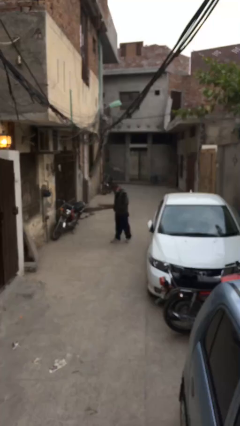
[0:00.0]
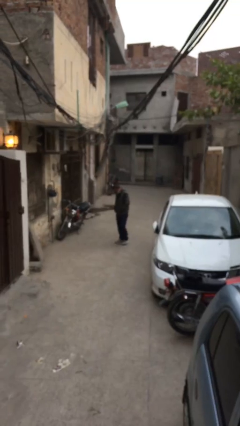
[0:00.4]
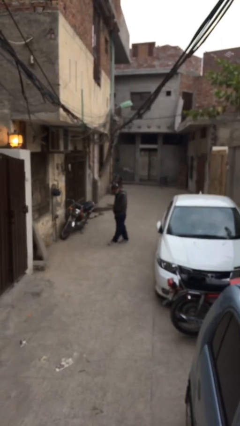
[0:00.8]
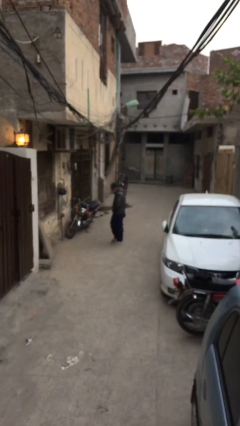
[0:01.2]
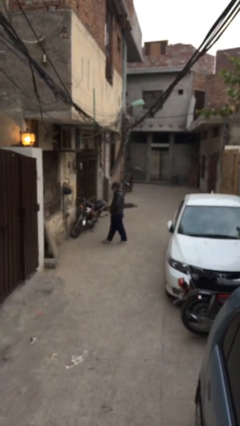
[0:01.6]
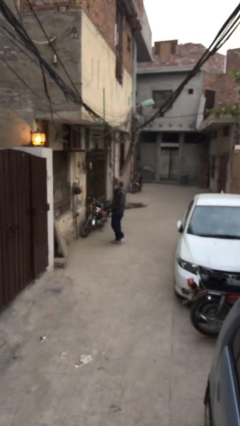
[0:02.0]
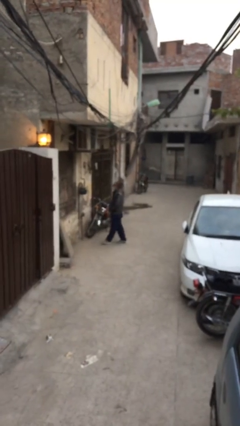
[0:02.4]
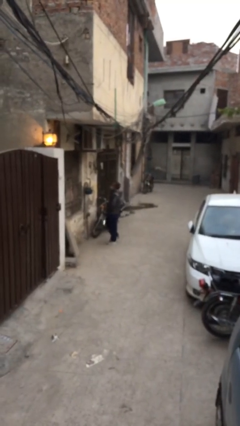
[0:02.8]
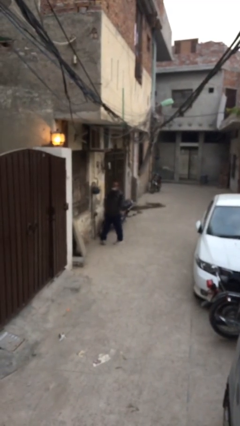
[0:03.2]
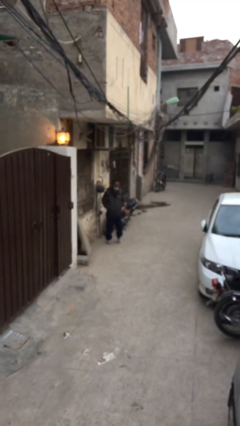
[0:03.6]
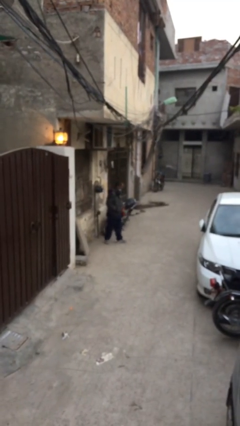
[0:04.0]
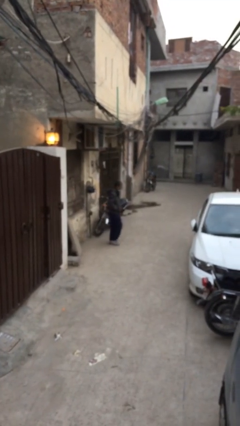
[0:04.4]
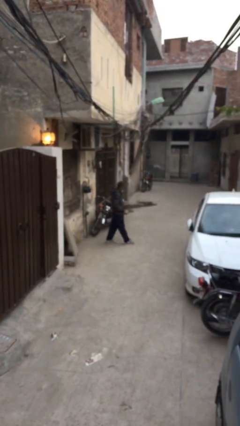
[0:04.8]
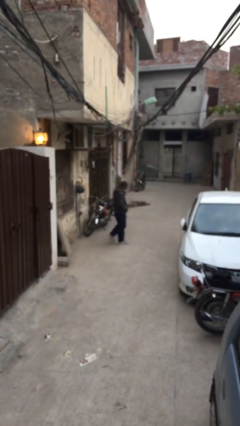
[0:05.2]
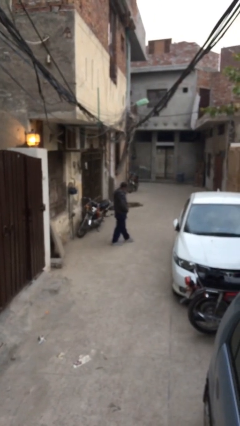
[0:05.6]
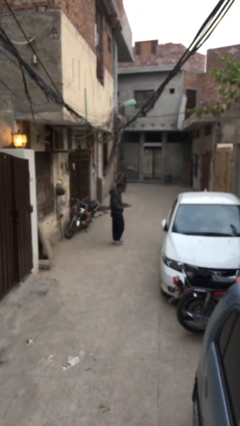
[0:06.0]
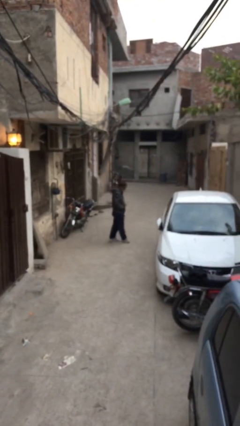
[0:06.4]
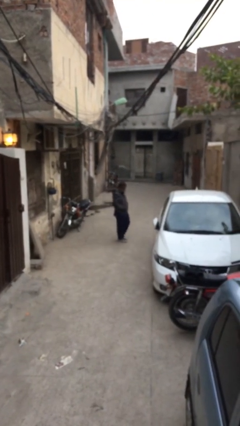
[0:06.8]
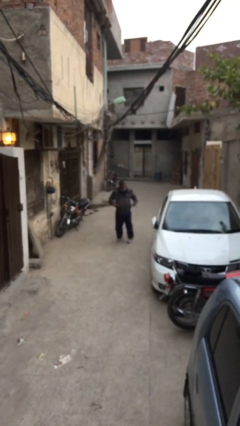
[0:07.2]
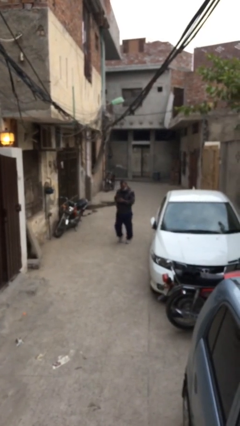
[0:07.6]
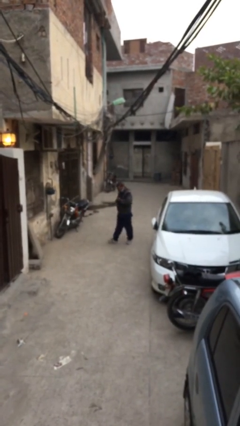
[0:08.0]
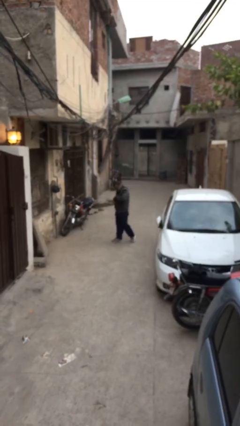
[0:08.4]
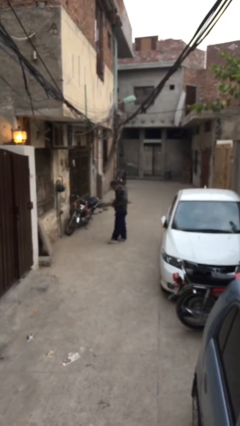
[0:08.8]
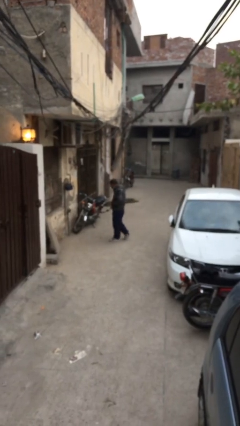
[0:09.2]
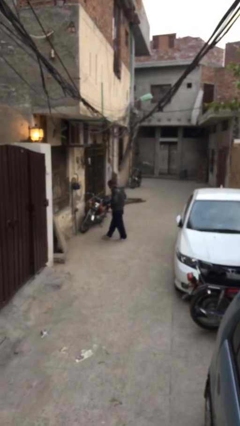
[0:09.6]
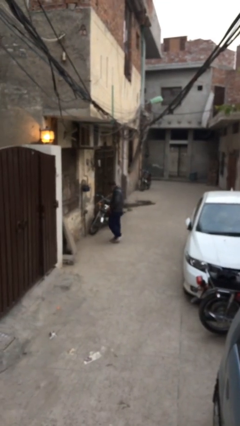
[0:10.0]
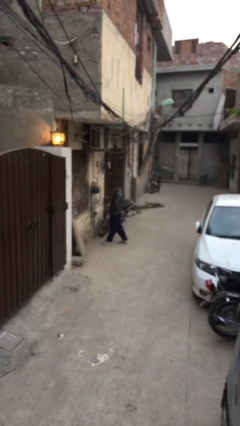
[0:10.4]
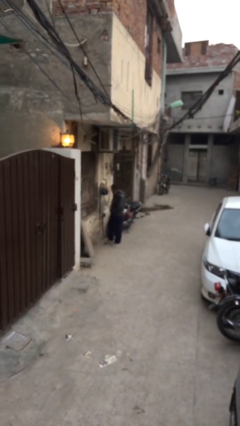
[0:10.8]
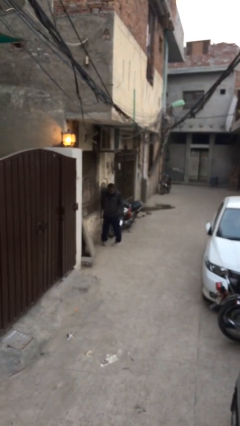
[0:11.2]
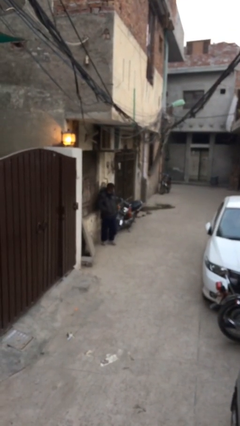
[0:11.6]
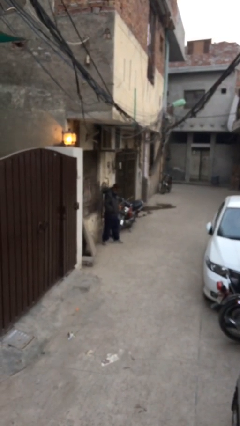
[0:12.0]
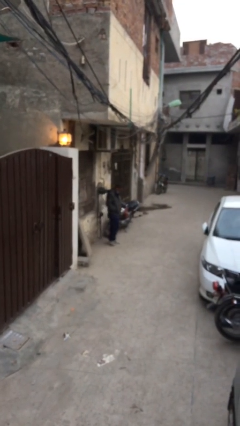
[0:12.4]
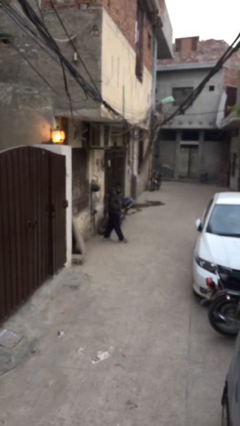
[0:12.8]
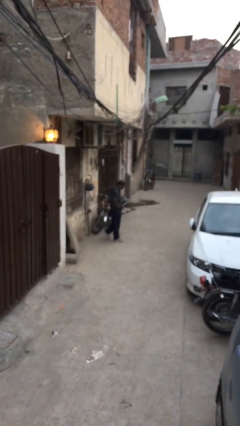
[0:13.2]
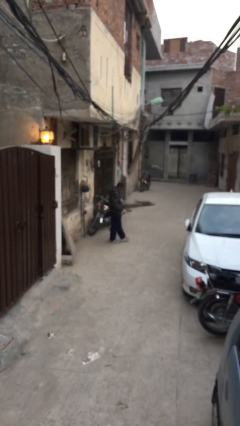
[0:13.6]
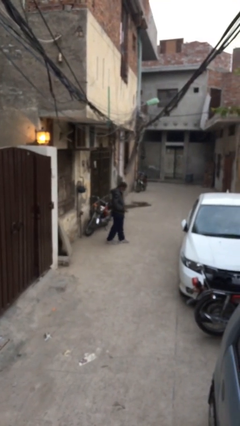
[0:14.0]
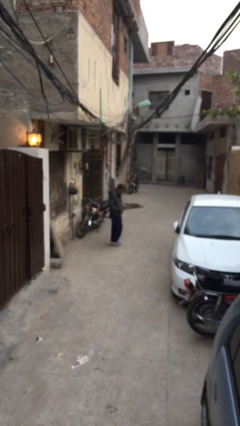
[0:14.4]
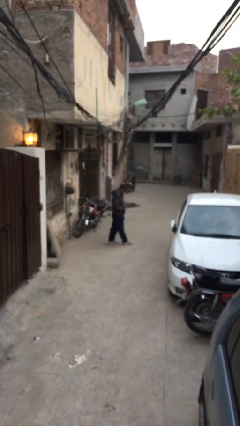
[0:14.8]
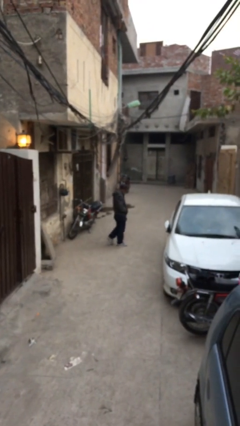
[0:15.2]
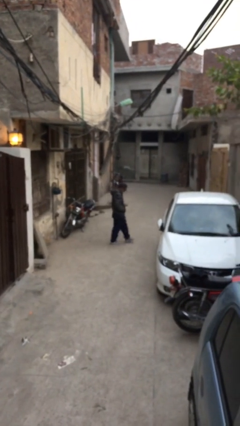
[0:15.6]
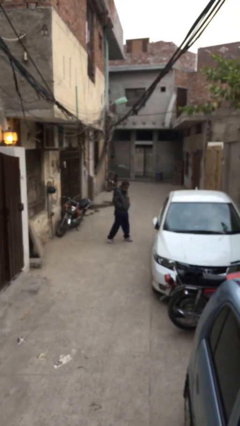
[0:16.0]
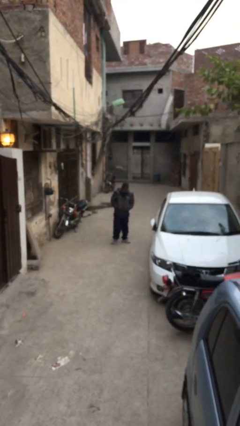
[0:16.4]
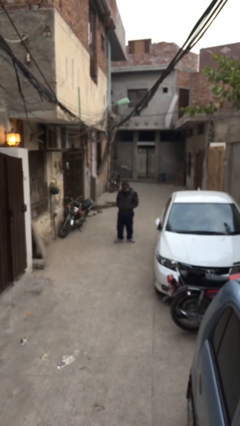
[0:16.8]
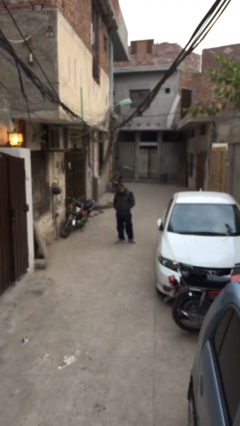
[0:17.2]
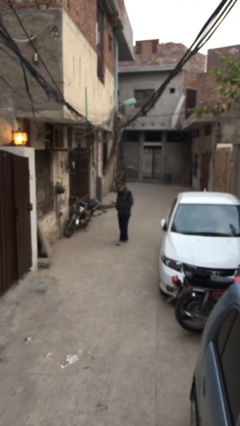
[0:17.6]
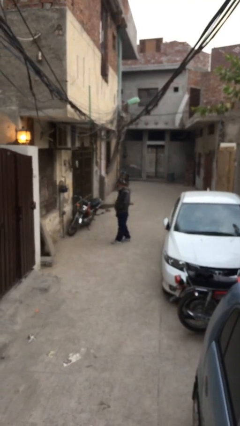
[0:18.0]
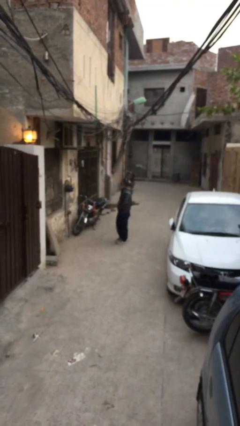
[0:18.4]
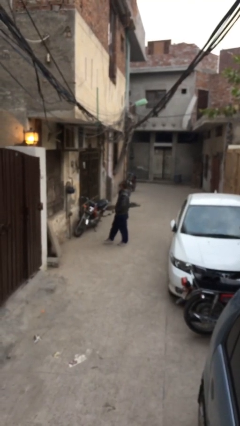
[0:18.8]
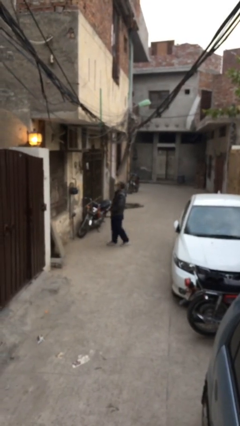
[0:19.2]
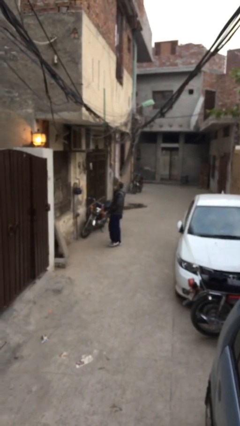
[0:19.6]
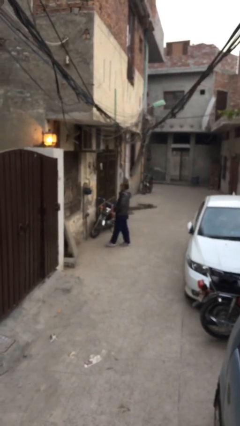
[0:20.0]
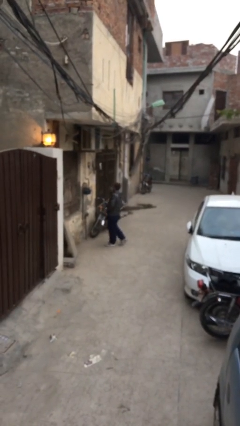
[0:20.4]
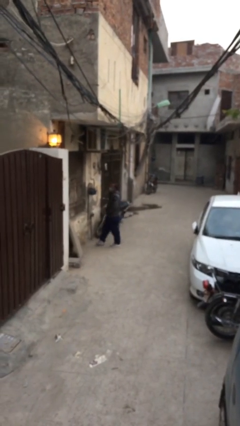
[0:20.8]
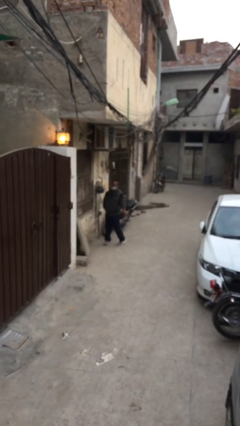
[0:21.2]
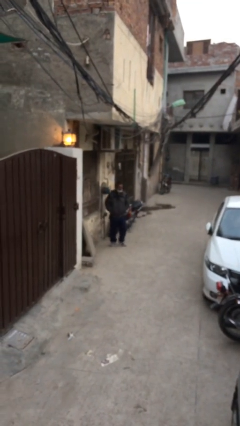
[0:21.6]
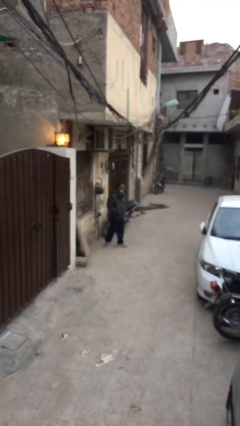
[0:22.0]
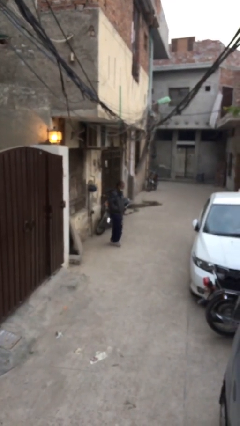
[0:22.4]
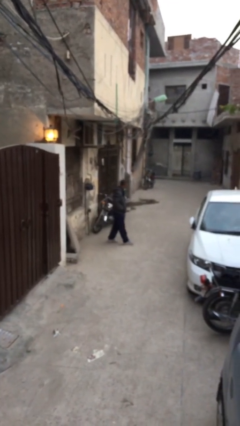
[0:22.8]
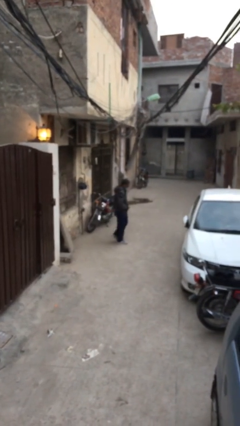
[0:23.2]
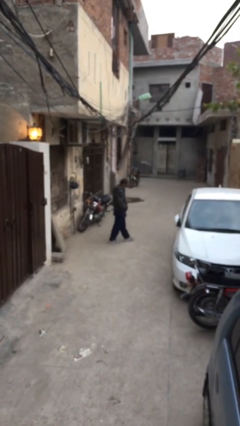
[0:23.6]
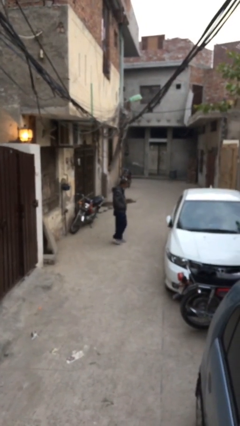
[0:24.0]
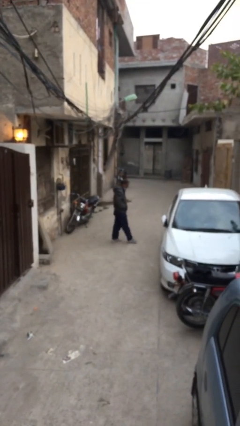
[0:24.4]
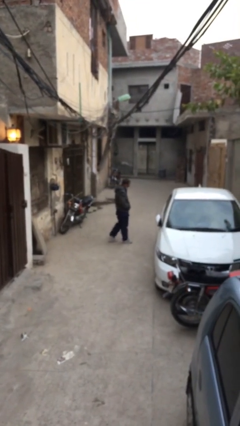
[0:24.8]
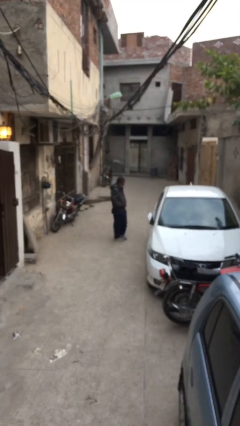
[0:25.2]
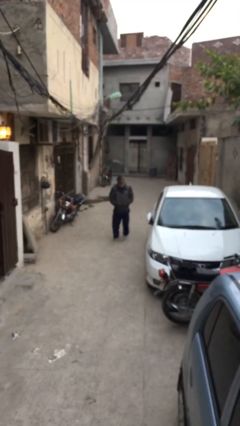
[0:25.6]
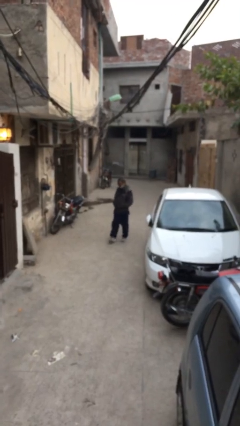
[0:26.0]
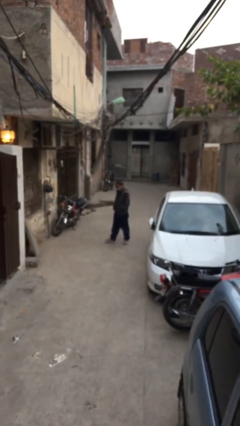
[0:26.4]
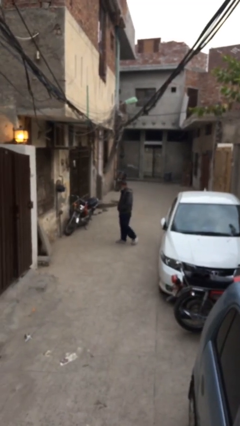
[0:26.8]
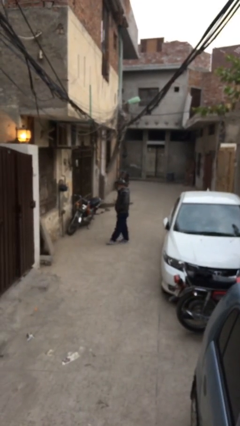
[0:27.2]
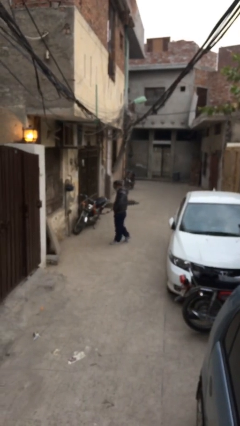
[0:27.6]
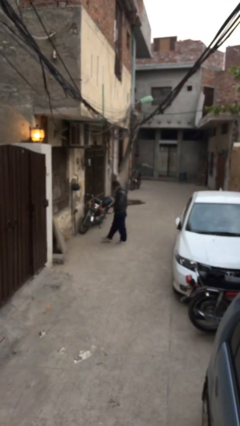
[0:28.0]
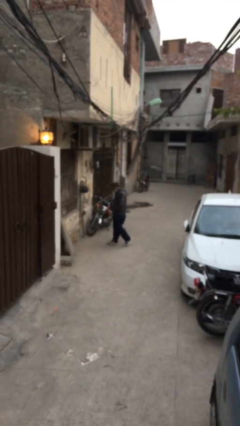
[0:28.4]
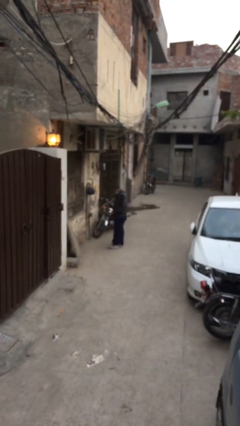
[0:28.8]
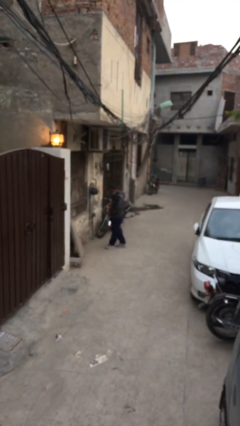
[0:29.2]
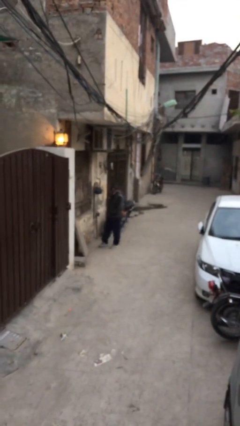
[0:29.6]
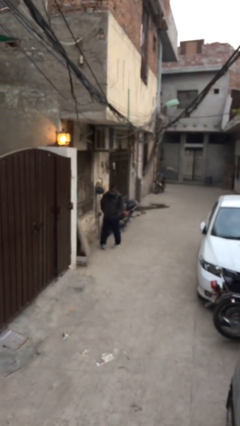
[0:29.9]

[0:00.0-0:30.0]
person walks

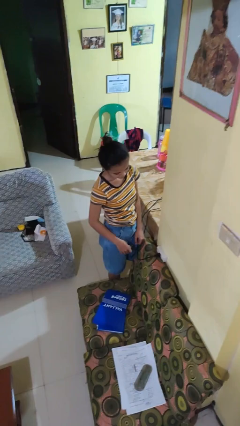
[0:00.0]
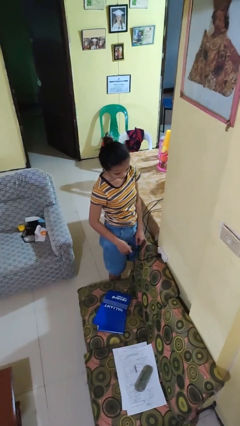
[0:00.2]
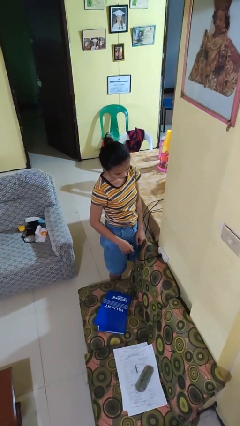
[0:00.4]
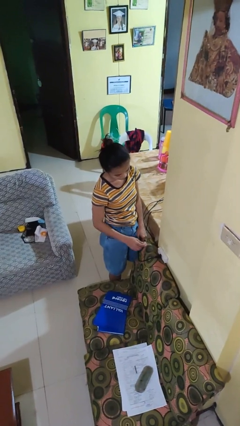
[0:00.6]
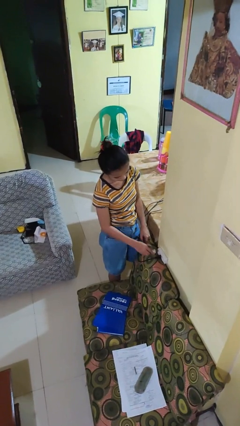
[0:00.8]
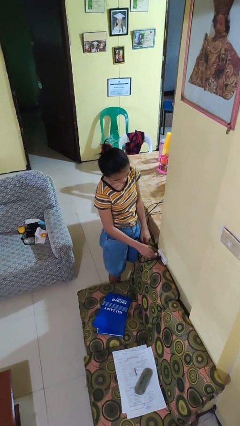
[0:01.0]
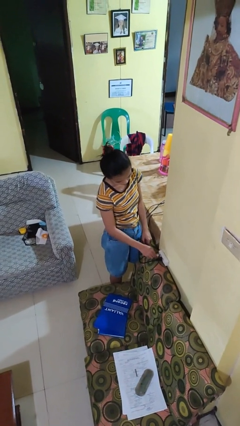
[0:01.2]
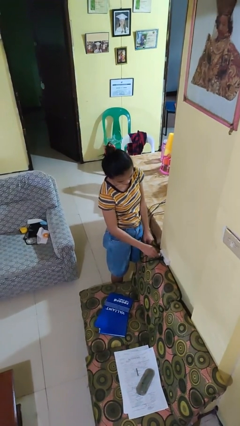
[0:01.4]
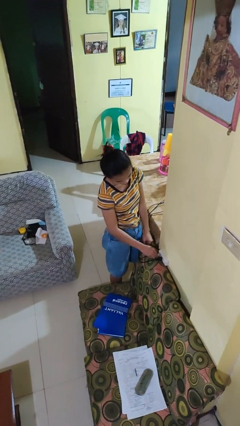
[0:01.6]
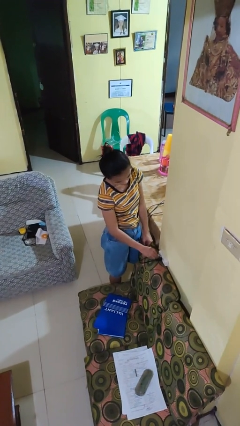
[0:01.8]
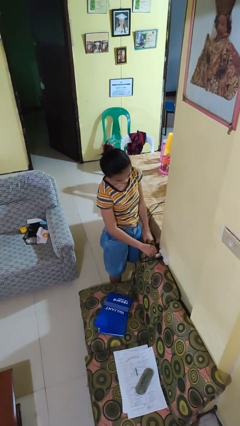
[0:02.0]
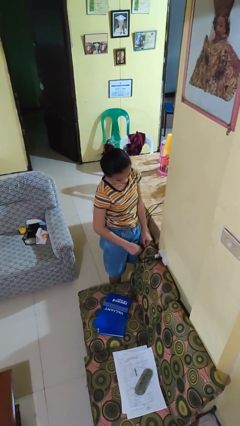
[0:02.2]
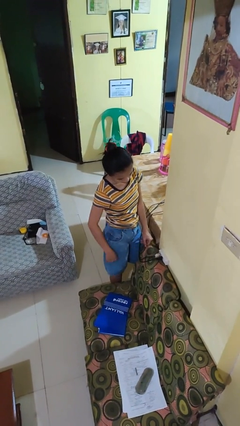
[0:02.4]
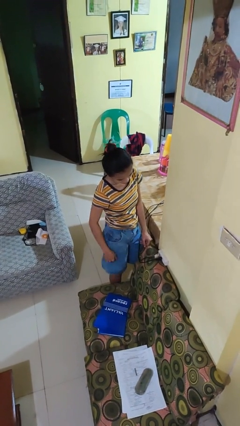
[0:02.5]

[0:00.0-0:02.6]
person plugs into electrical socket

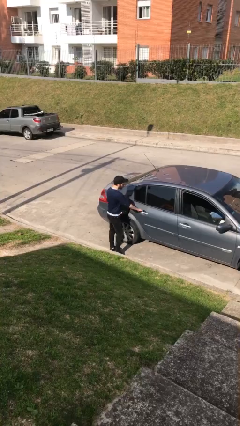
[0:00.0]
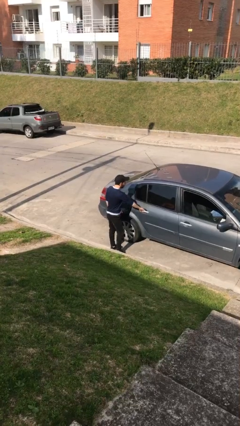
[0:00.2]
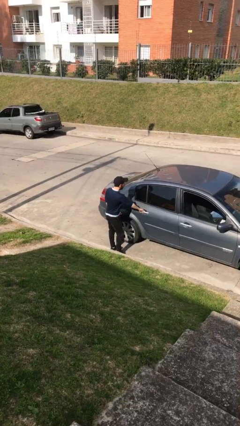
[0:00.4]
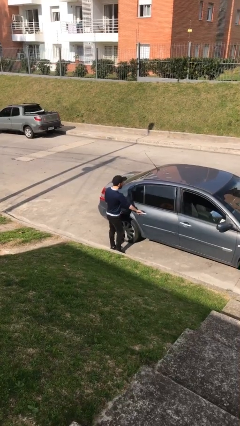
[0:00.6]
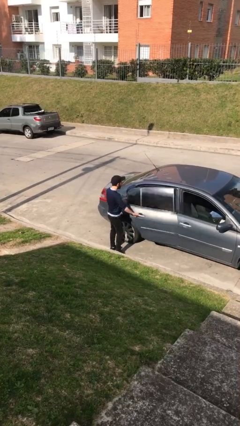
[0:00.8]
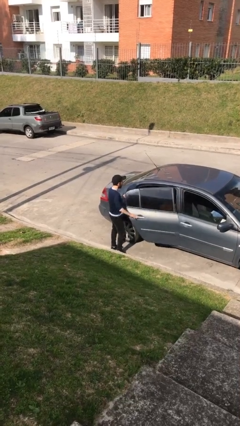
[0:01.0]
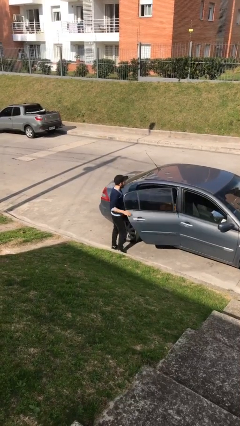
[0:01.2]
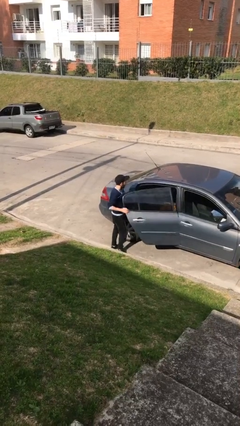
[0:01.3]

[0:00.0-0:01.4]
person opens car door
